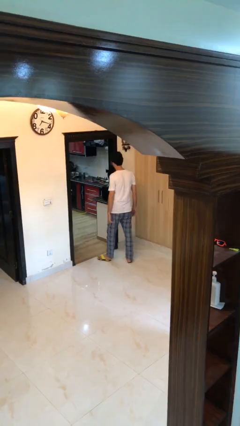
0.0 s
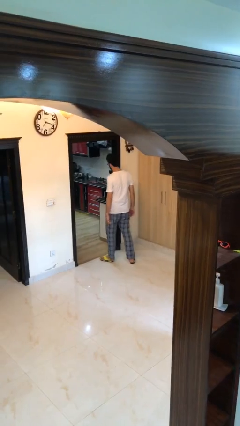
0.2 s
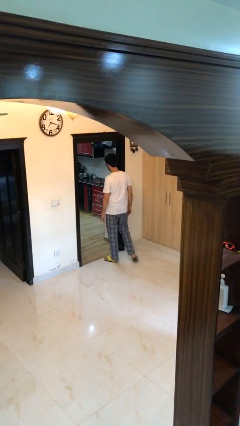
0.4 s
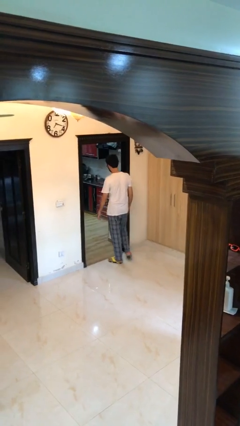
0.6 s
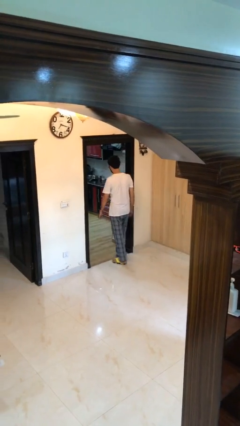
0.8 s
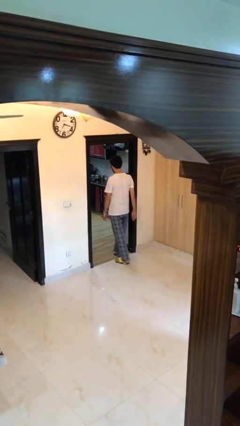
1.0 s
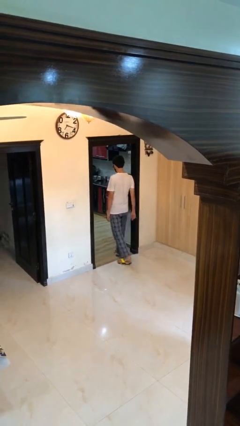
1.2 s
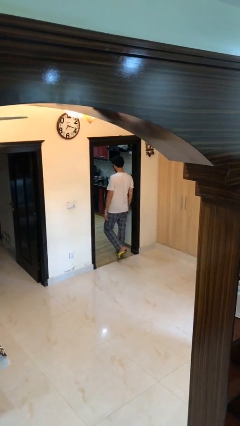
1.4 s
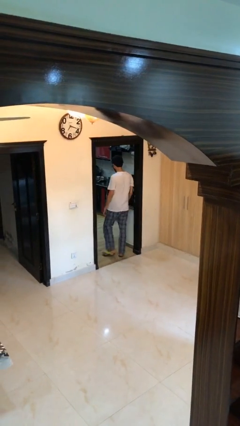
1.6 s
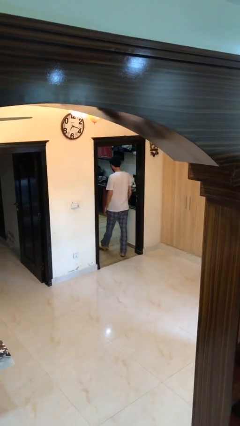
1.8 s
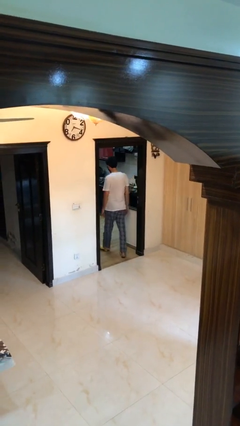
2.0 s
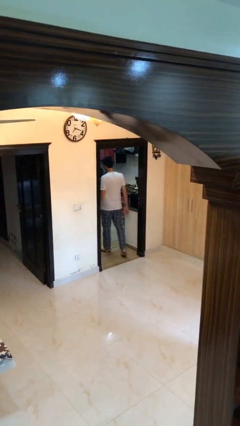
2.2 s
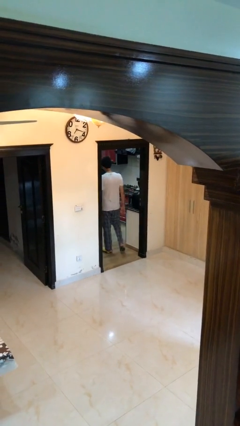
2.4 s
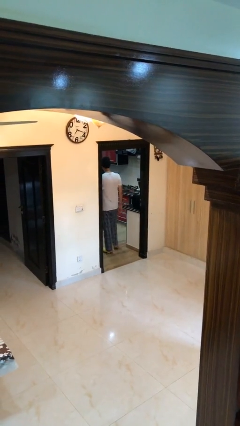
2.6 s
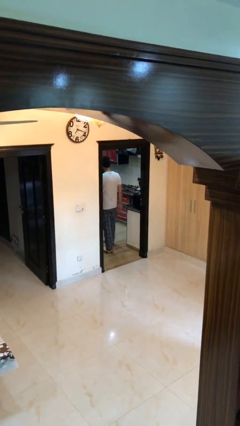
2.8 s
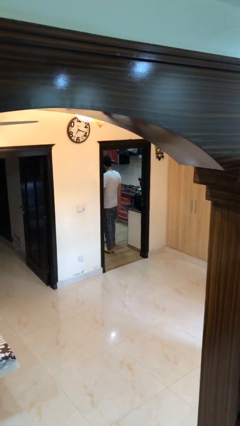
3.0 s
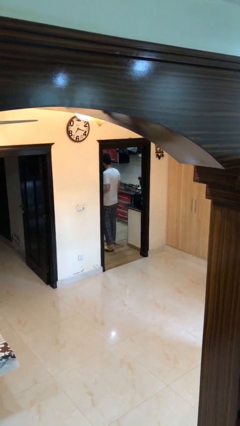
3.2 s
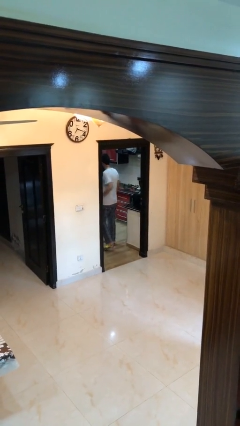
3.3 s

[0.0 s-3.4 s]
person exits scene through structure

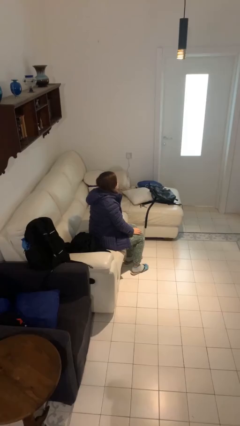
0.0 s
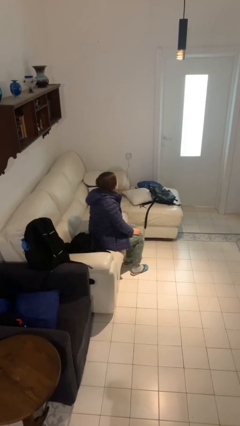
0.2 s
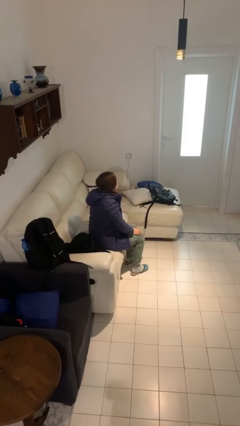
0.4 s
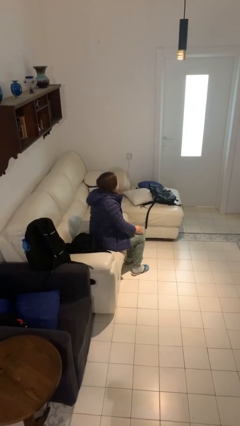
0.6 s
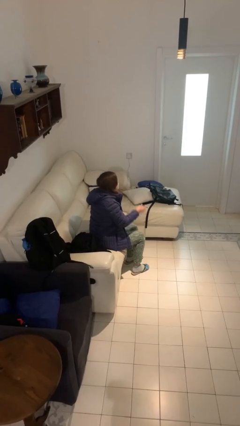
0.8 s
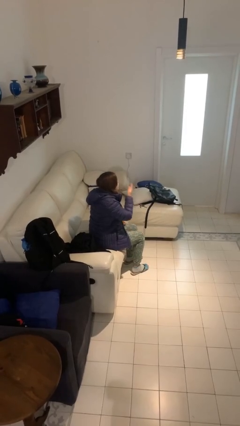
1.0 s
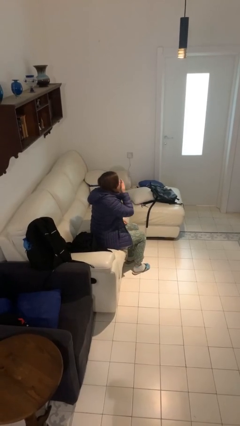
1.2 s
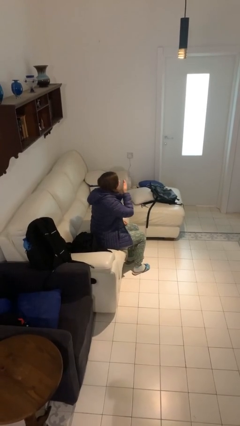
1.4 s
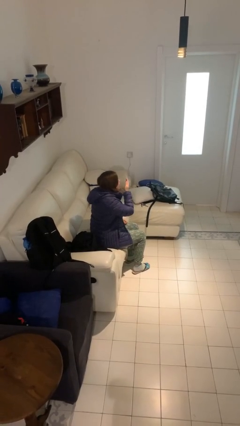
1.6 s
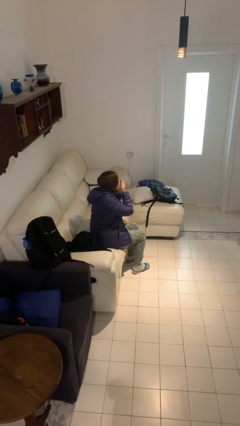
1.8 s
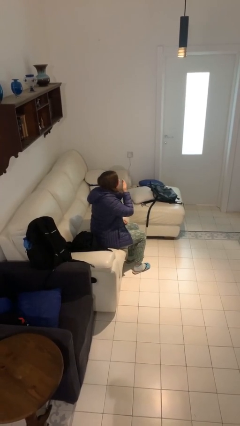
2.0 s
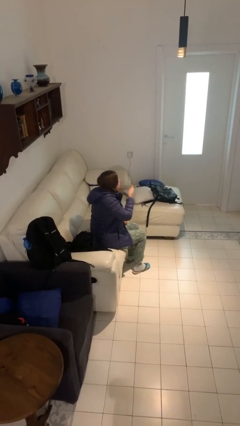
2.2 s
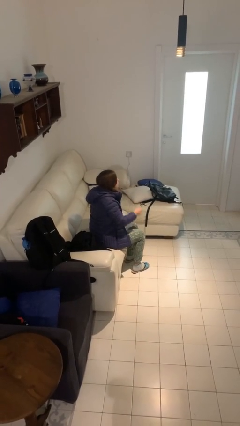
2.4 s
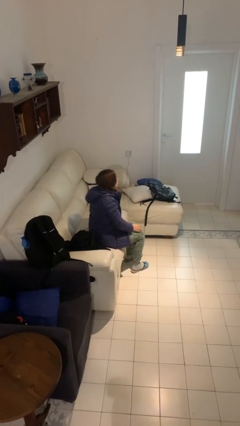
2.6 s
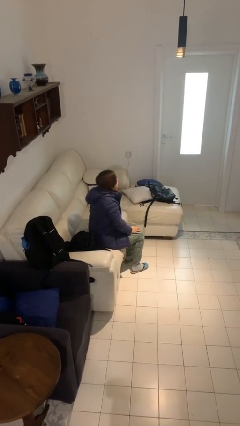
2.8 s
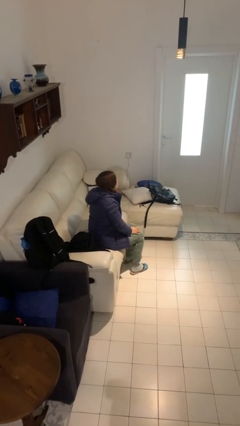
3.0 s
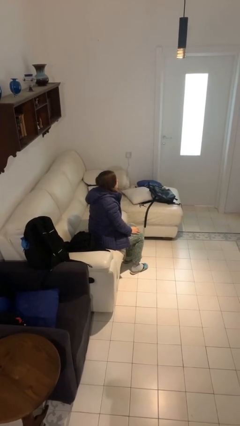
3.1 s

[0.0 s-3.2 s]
person yawns

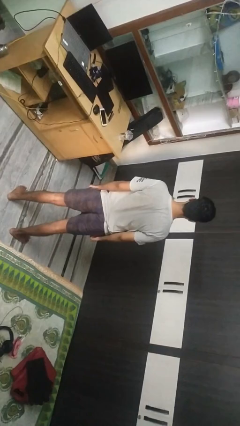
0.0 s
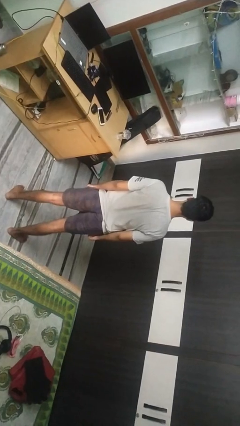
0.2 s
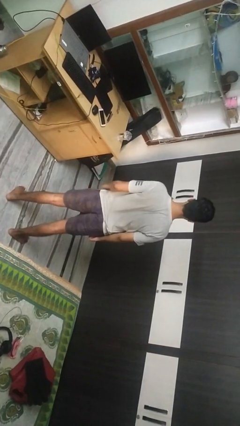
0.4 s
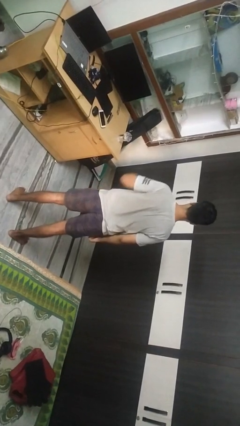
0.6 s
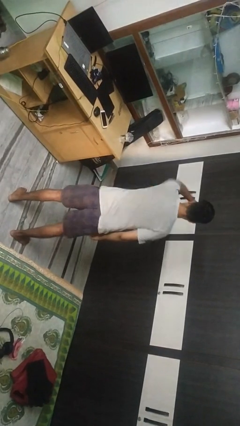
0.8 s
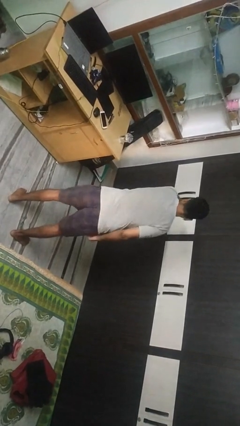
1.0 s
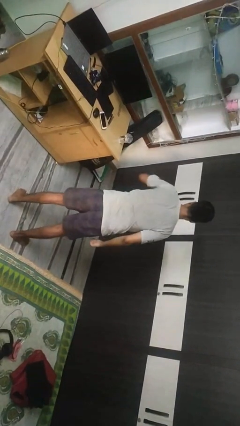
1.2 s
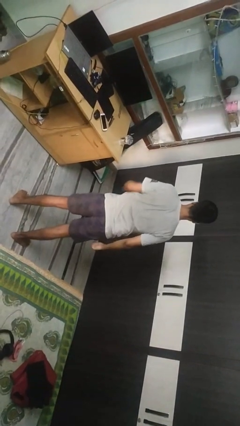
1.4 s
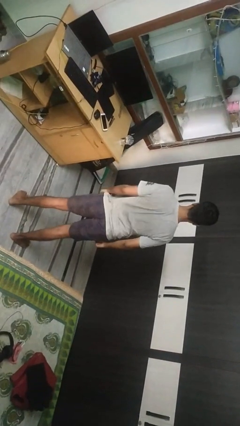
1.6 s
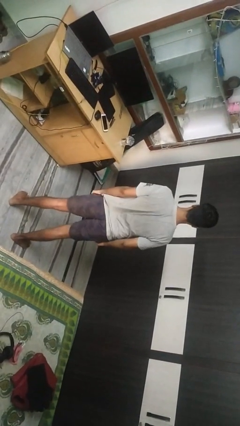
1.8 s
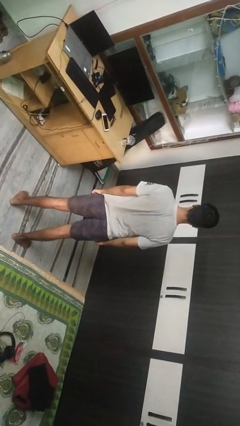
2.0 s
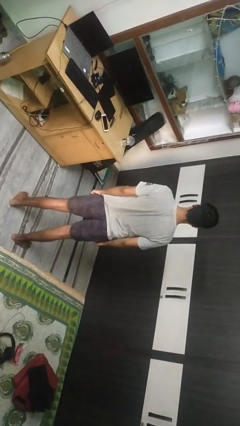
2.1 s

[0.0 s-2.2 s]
person punches

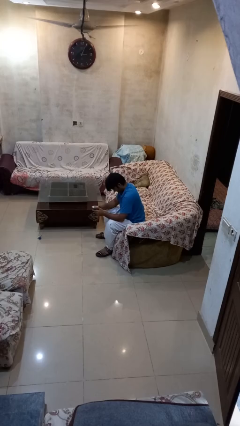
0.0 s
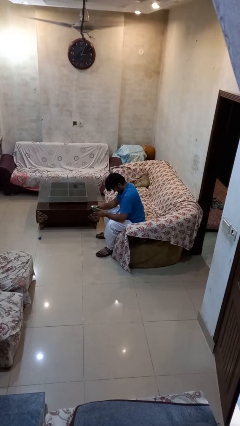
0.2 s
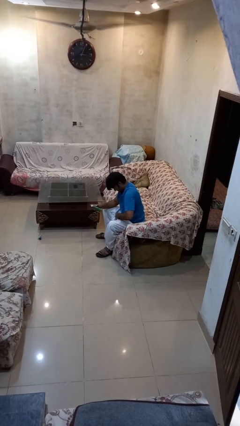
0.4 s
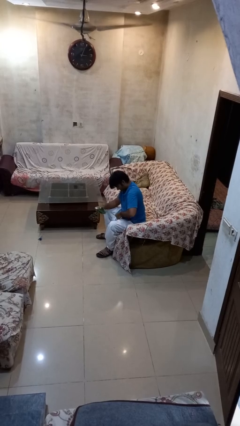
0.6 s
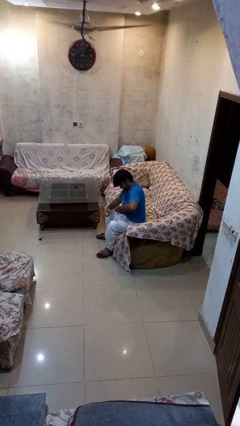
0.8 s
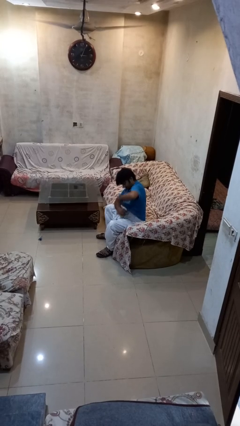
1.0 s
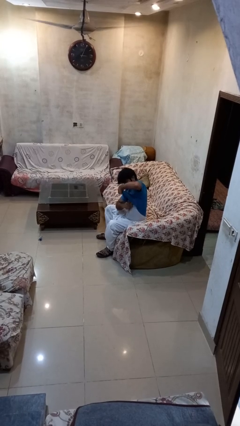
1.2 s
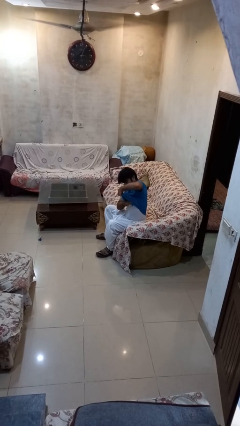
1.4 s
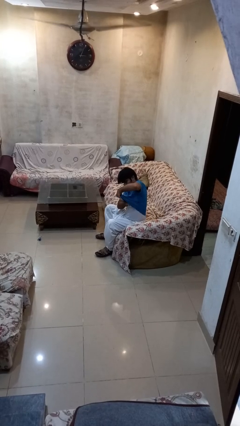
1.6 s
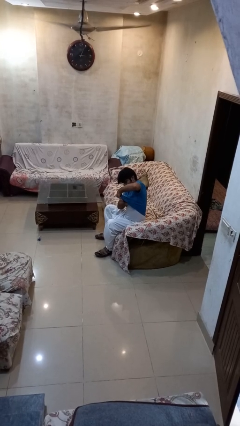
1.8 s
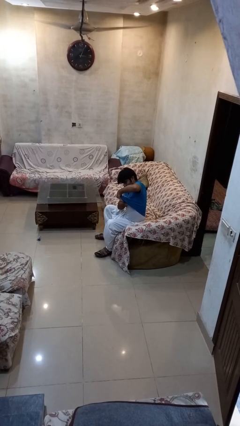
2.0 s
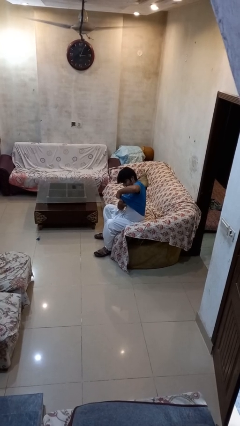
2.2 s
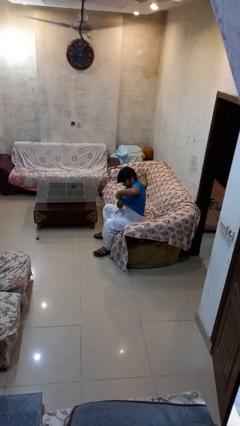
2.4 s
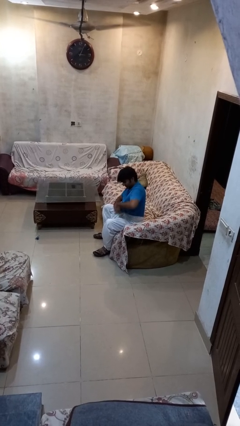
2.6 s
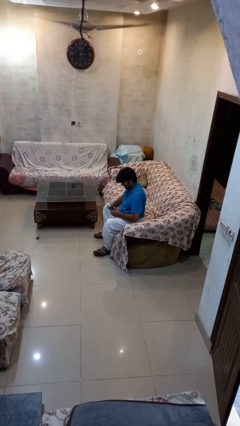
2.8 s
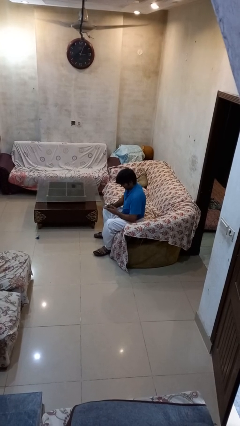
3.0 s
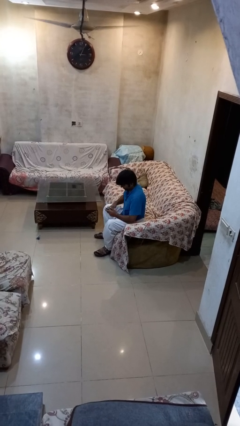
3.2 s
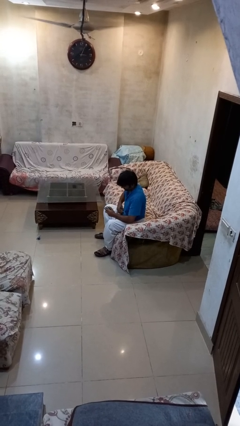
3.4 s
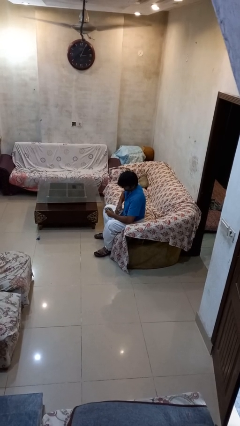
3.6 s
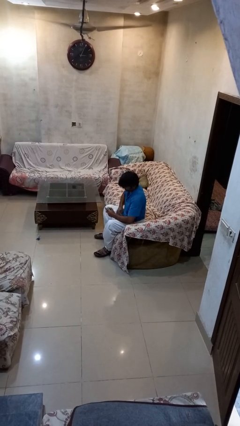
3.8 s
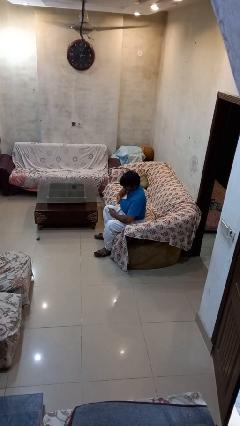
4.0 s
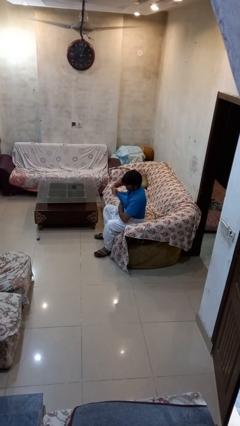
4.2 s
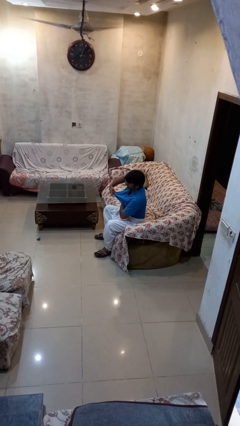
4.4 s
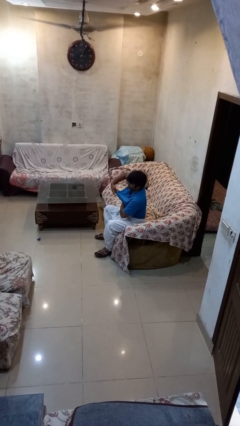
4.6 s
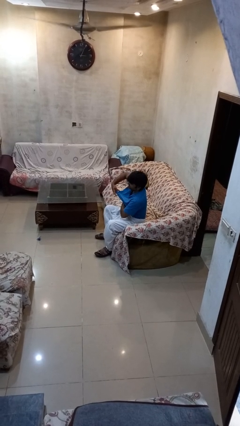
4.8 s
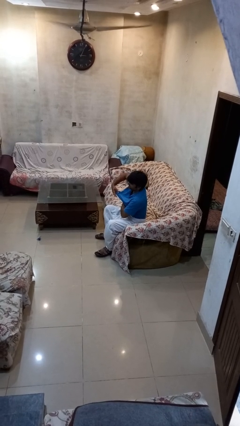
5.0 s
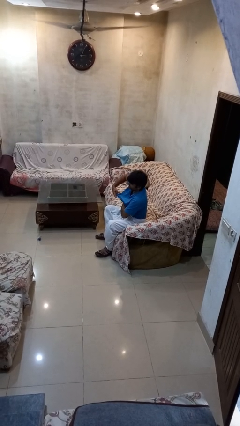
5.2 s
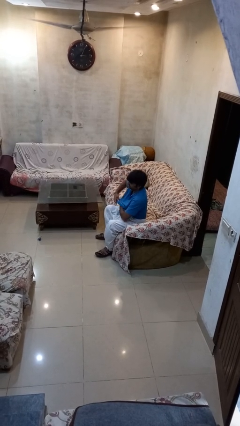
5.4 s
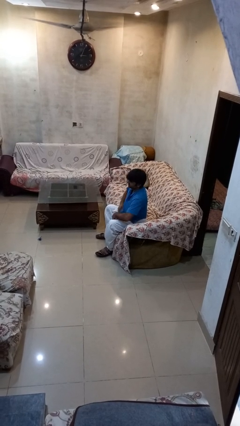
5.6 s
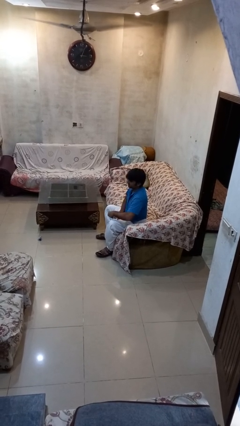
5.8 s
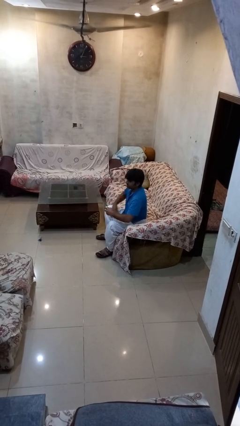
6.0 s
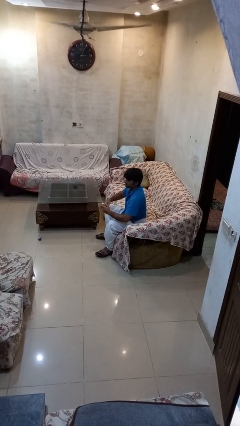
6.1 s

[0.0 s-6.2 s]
person applies deodorant

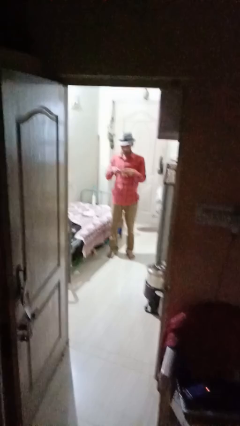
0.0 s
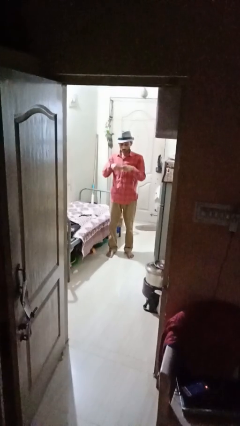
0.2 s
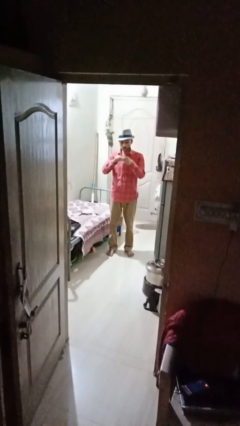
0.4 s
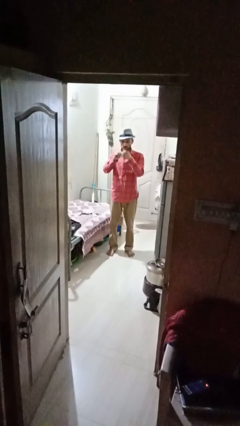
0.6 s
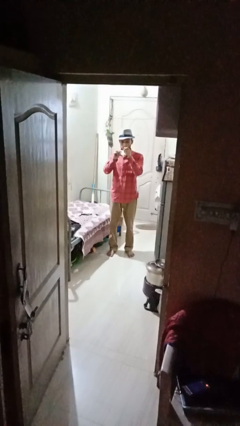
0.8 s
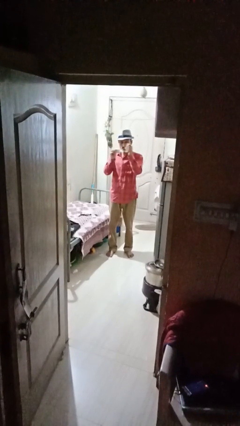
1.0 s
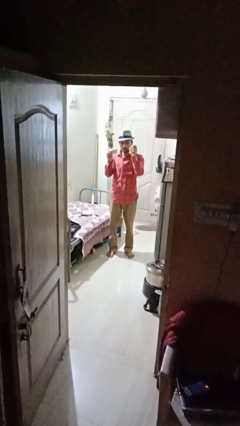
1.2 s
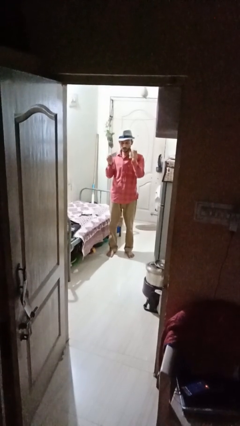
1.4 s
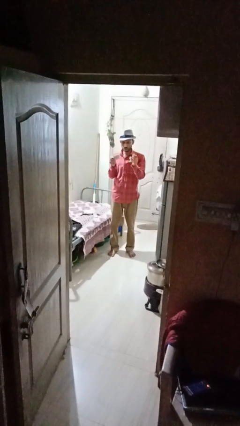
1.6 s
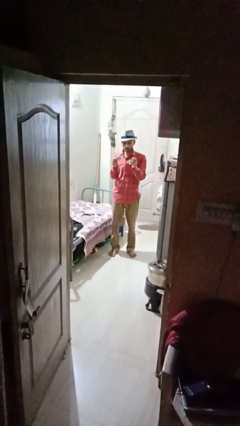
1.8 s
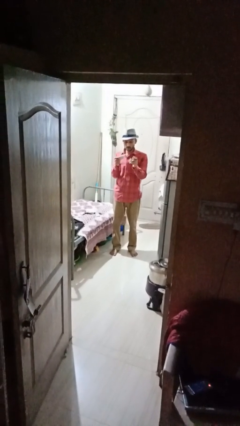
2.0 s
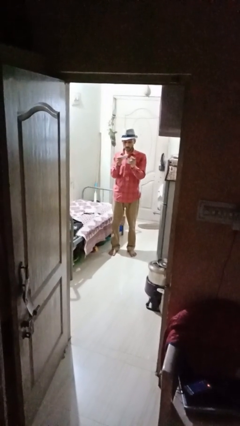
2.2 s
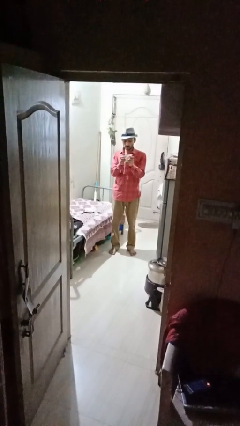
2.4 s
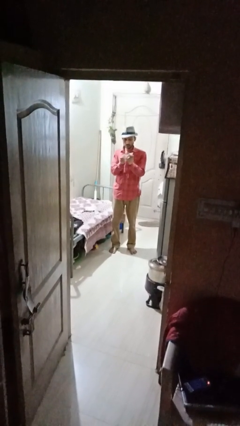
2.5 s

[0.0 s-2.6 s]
person tears paper

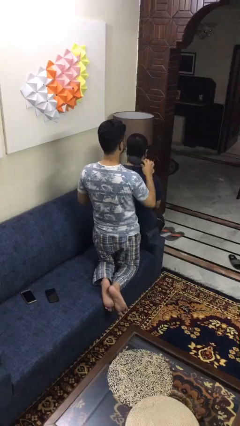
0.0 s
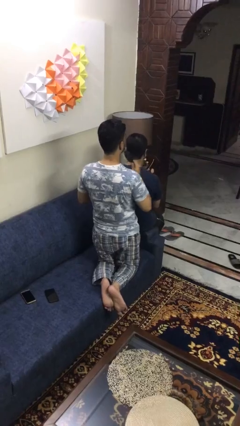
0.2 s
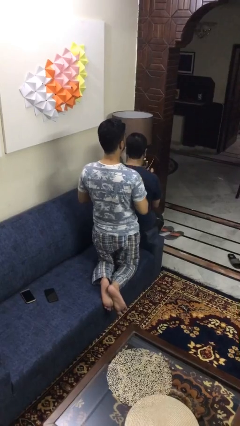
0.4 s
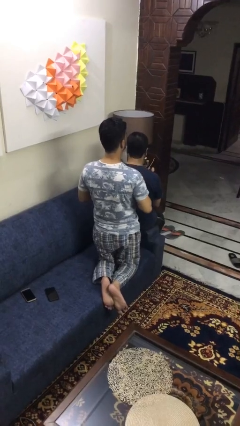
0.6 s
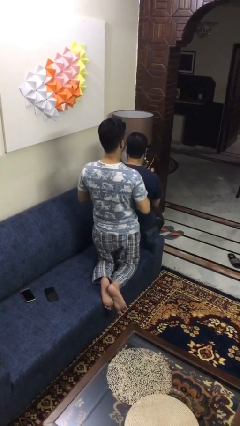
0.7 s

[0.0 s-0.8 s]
person brushes hair of person
